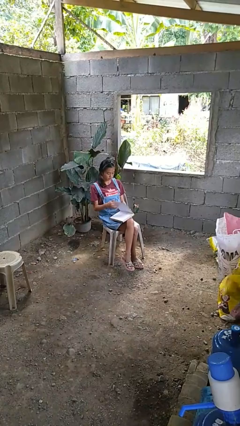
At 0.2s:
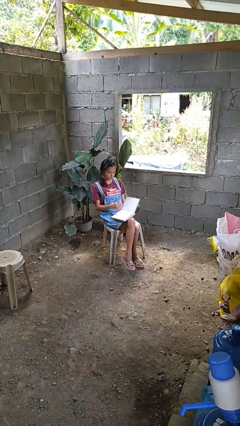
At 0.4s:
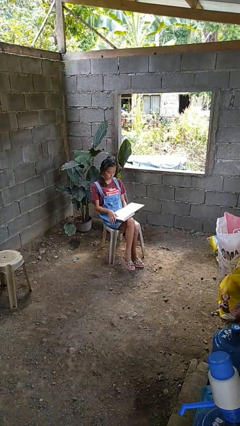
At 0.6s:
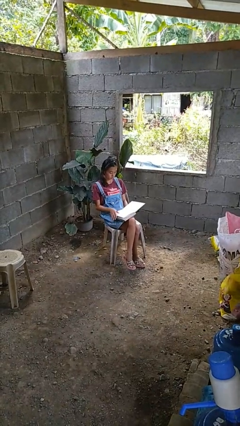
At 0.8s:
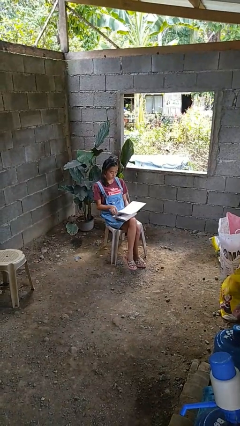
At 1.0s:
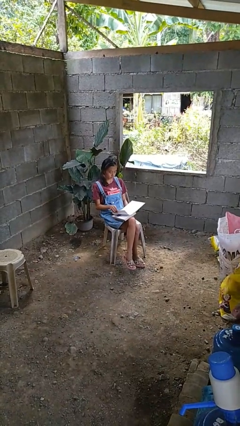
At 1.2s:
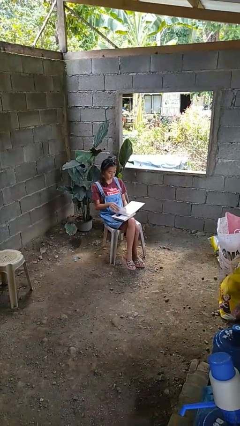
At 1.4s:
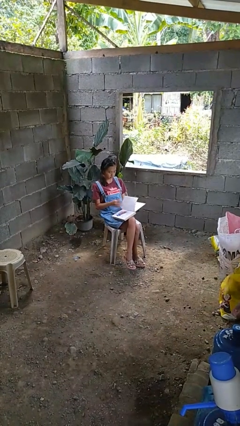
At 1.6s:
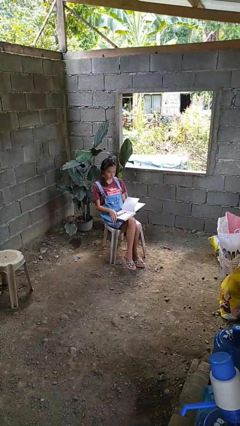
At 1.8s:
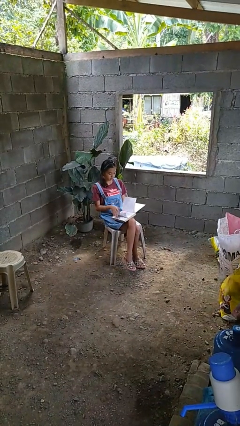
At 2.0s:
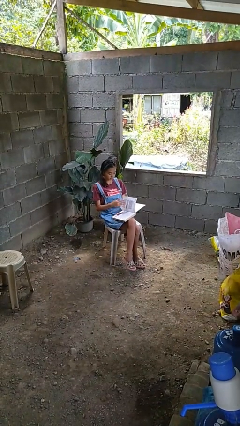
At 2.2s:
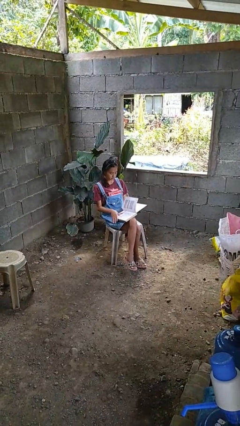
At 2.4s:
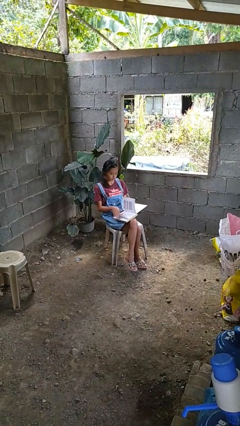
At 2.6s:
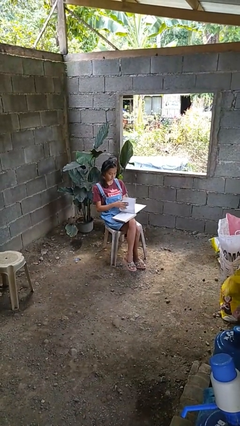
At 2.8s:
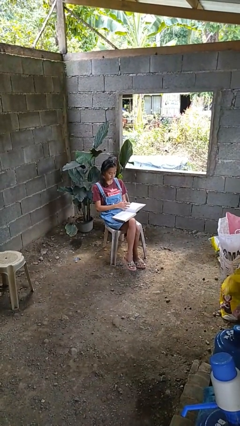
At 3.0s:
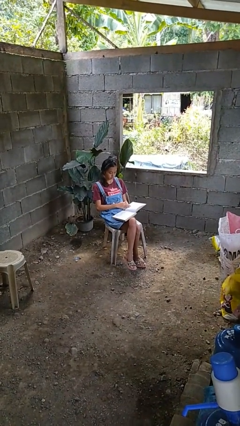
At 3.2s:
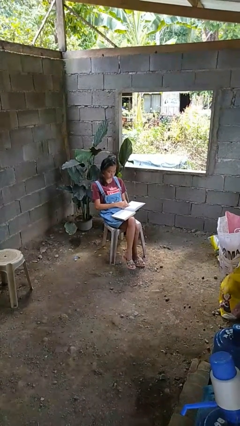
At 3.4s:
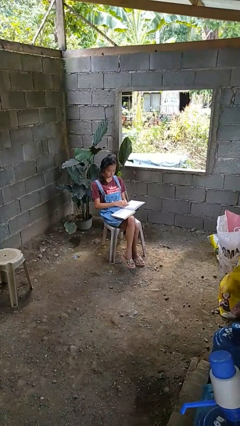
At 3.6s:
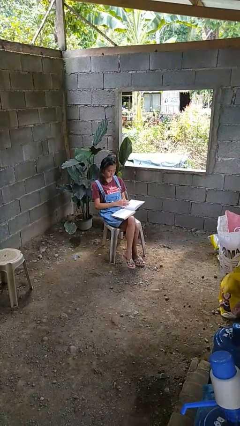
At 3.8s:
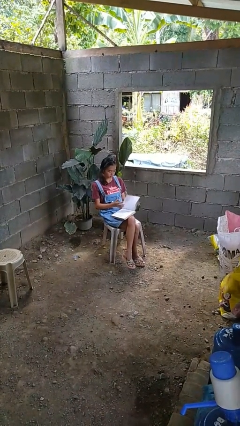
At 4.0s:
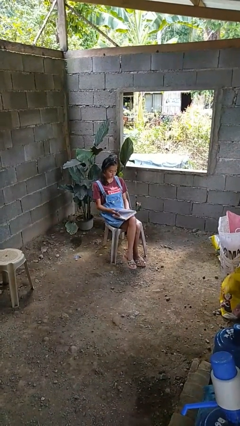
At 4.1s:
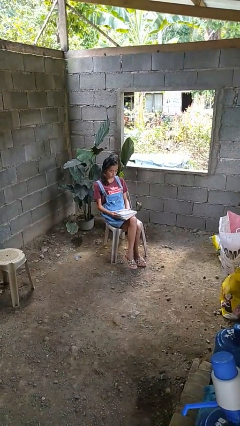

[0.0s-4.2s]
person reads book

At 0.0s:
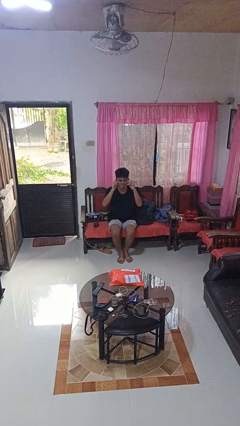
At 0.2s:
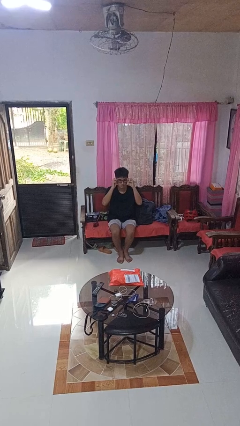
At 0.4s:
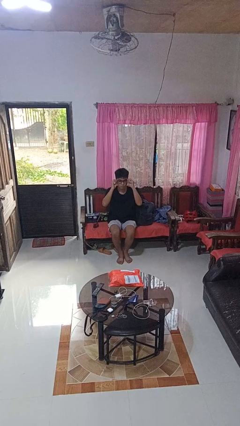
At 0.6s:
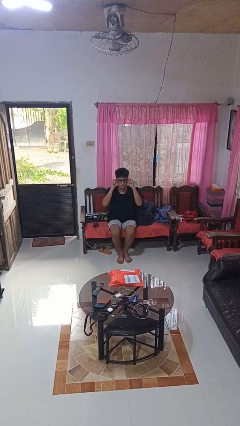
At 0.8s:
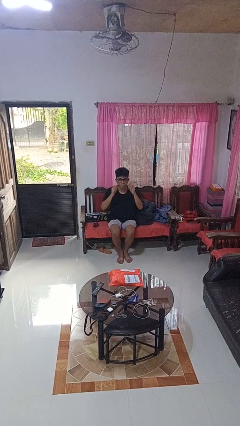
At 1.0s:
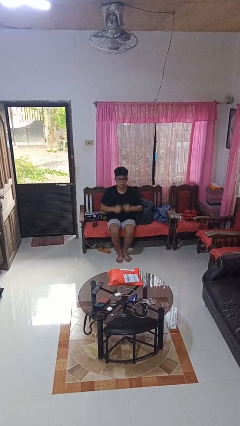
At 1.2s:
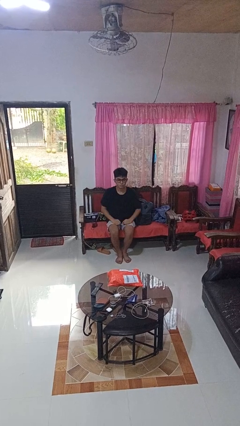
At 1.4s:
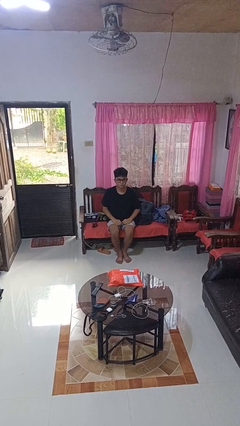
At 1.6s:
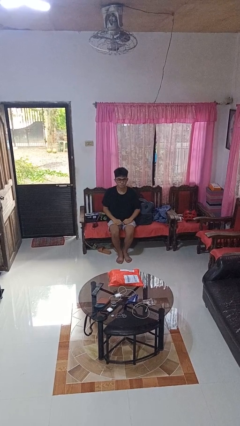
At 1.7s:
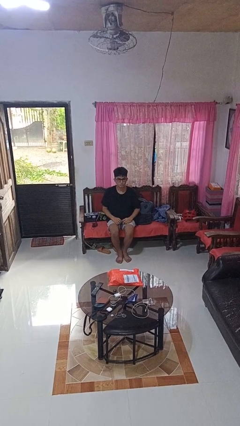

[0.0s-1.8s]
person puts on glasses

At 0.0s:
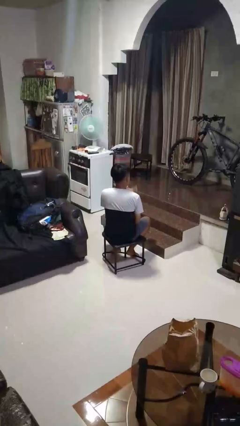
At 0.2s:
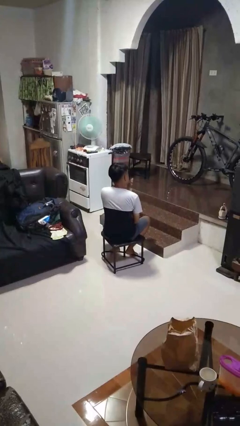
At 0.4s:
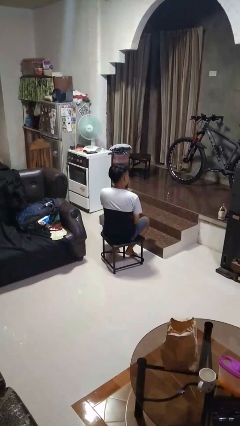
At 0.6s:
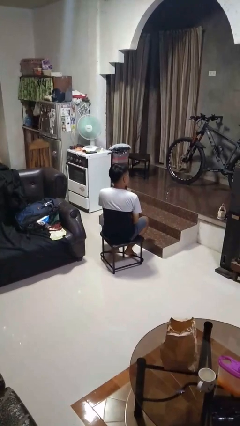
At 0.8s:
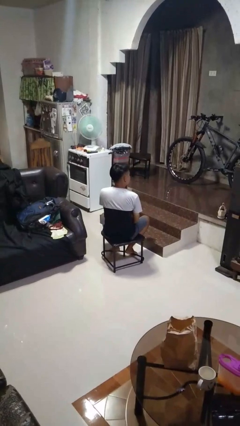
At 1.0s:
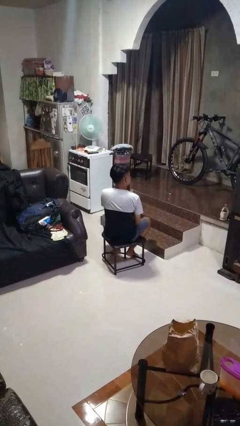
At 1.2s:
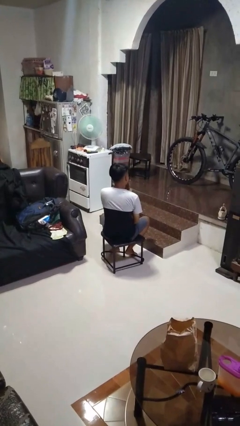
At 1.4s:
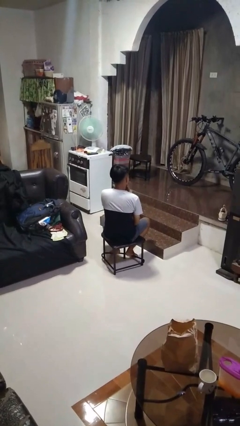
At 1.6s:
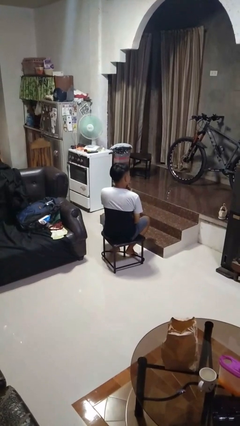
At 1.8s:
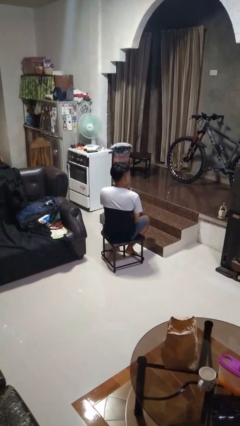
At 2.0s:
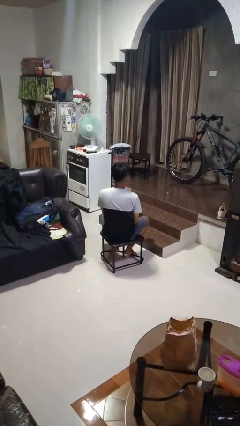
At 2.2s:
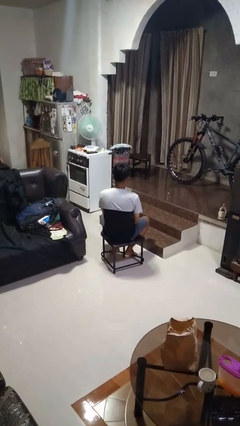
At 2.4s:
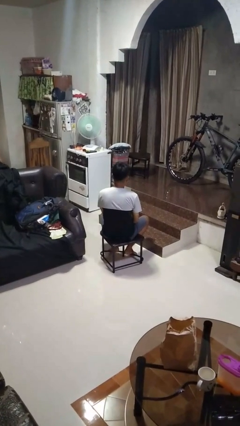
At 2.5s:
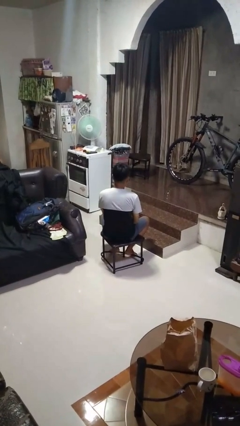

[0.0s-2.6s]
person strokes chin

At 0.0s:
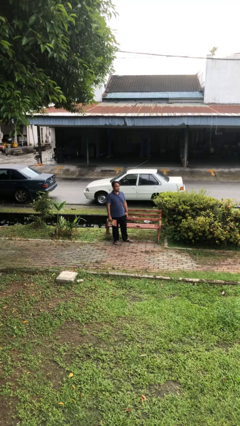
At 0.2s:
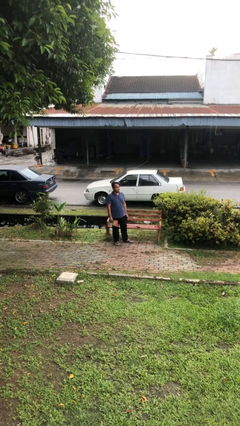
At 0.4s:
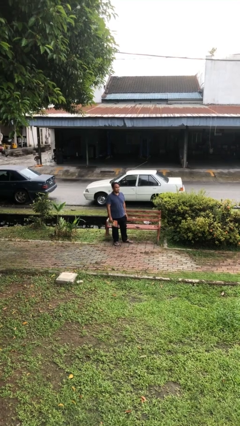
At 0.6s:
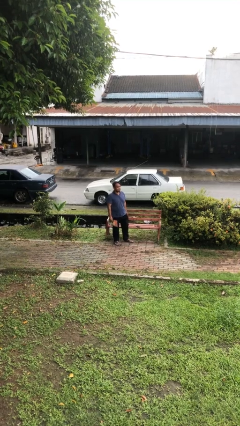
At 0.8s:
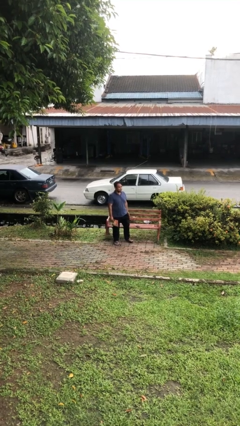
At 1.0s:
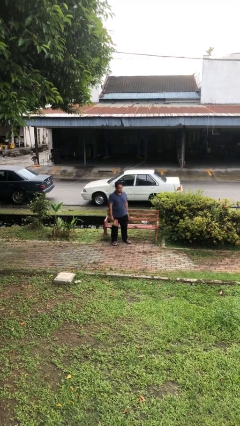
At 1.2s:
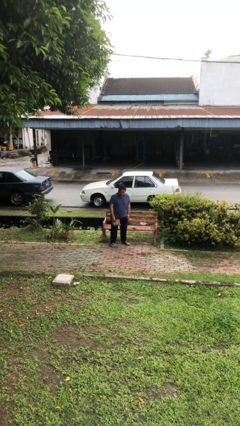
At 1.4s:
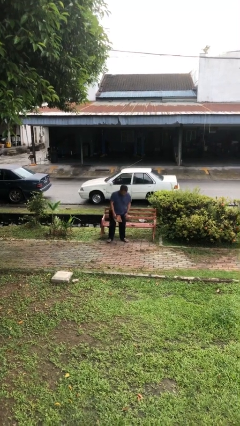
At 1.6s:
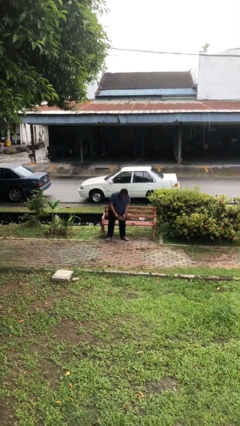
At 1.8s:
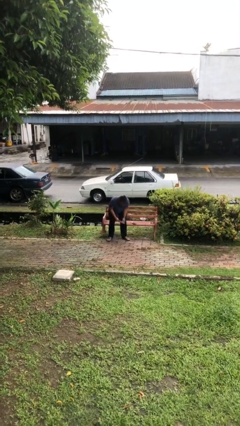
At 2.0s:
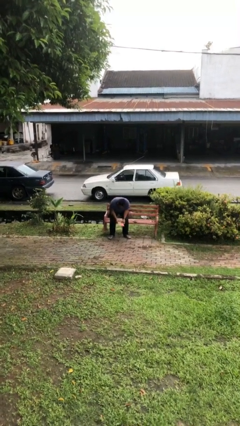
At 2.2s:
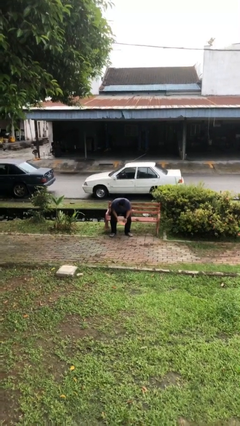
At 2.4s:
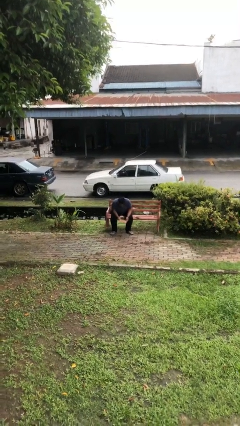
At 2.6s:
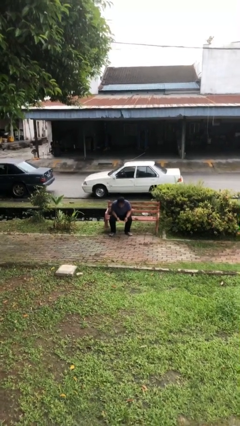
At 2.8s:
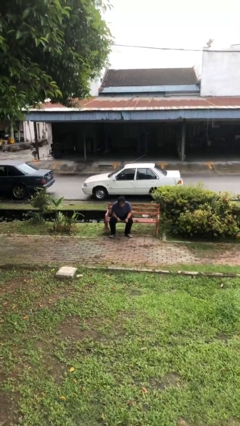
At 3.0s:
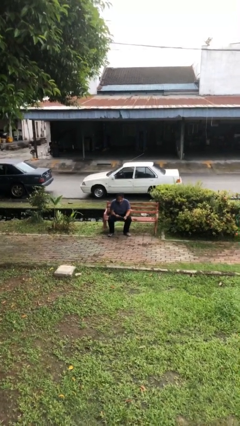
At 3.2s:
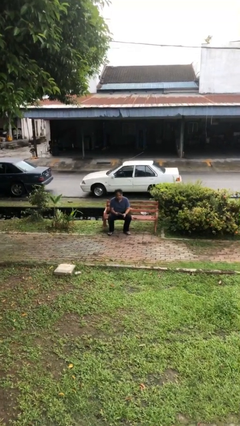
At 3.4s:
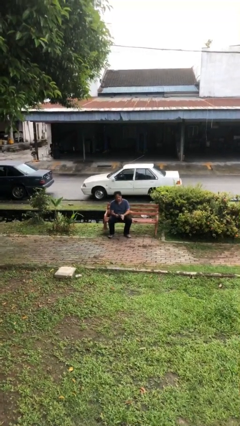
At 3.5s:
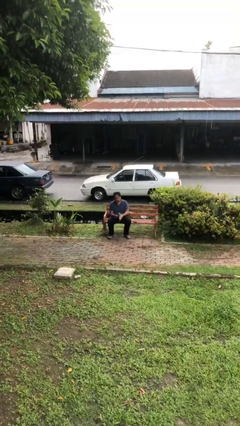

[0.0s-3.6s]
person sits down

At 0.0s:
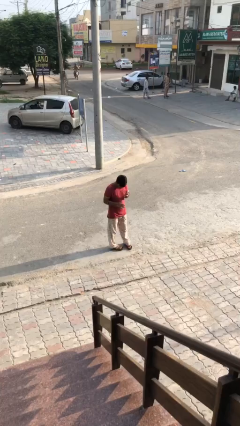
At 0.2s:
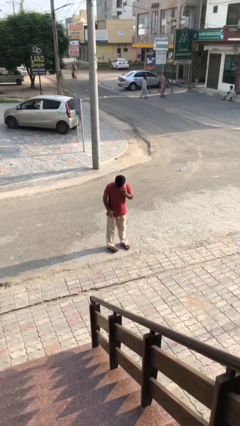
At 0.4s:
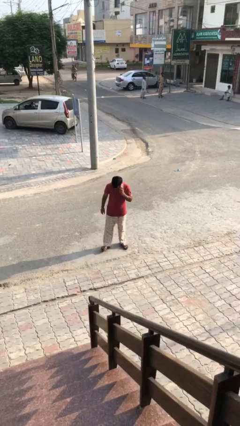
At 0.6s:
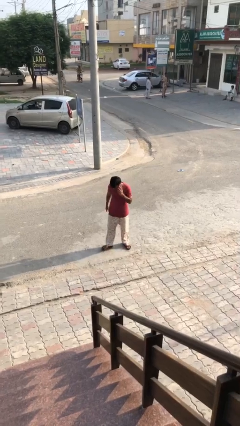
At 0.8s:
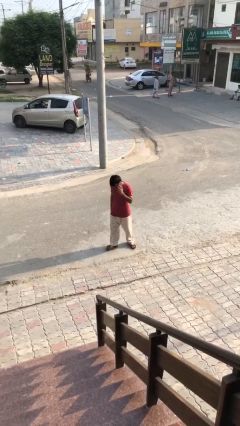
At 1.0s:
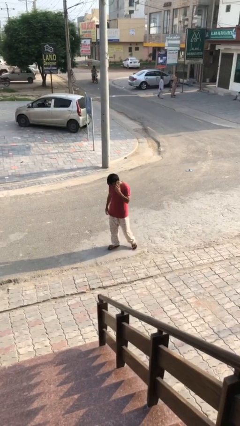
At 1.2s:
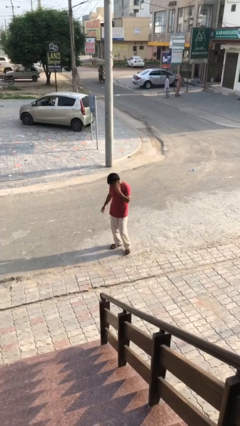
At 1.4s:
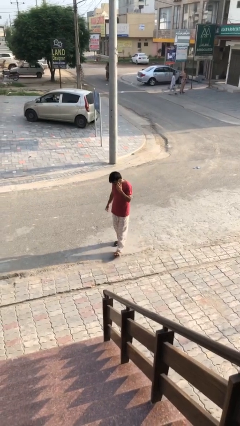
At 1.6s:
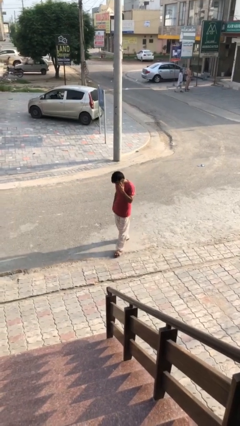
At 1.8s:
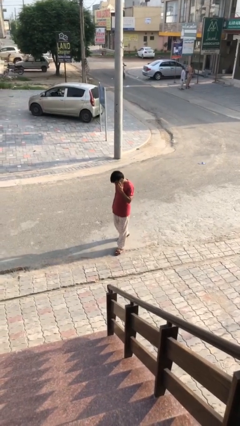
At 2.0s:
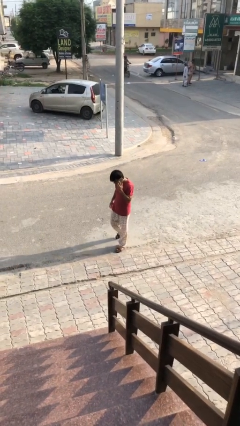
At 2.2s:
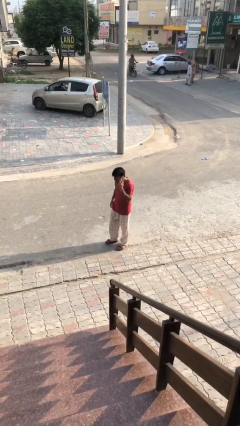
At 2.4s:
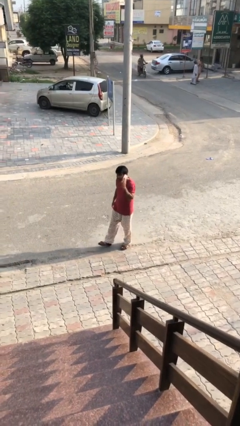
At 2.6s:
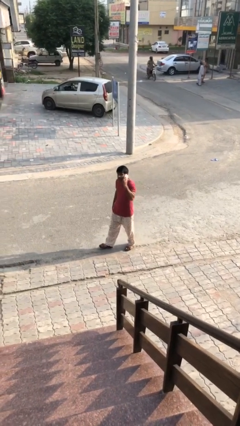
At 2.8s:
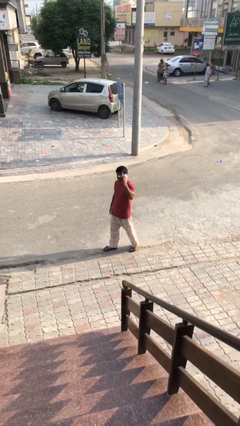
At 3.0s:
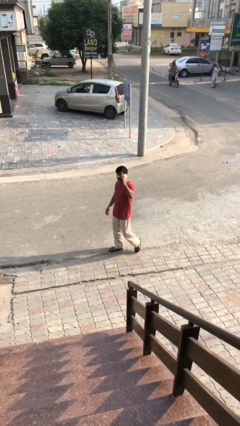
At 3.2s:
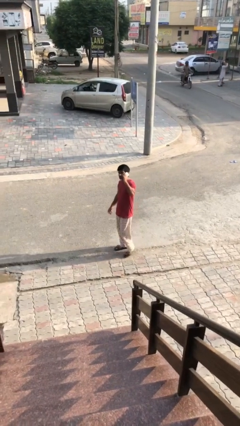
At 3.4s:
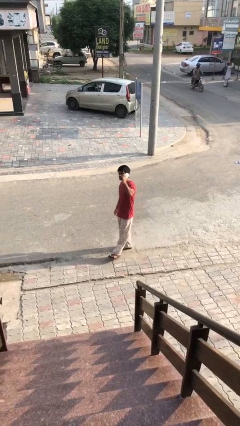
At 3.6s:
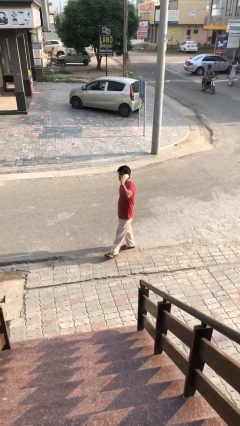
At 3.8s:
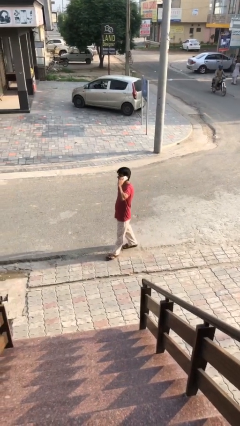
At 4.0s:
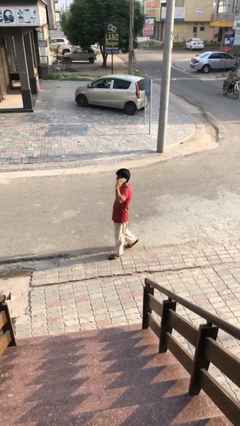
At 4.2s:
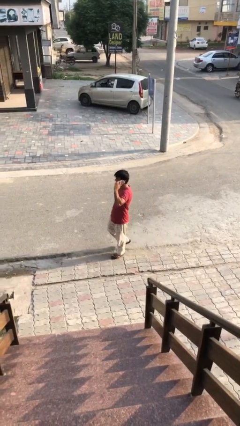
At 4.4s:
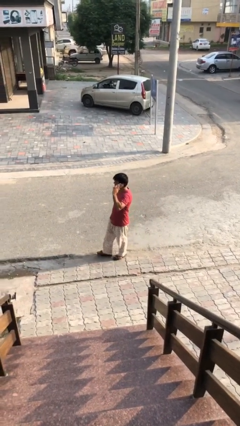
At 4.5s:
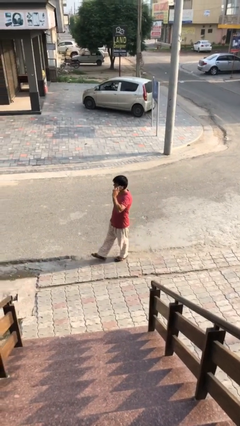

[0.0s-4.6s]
person talks on phone

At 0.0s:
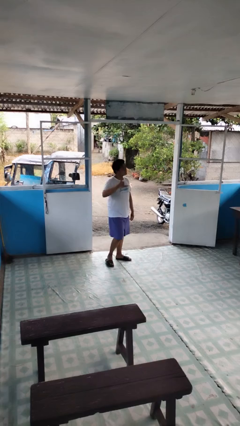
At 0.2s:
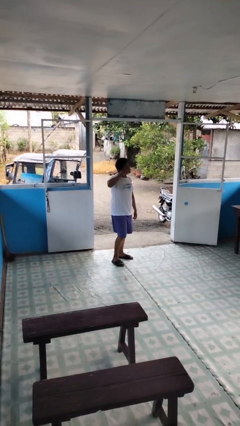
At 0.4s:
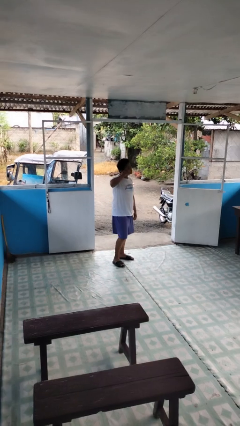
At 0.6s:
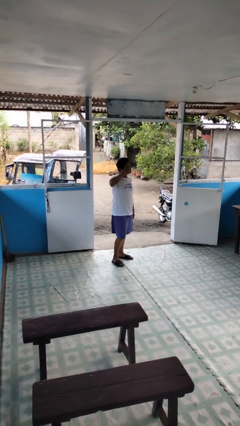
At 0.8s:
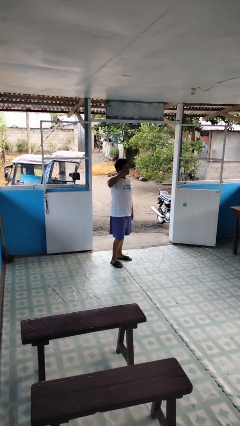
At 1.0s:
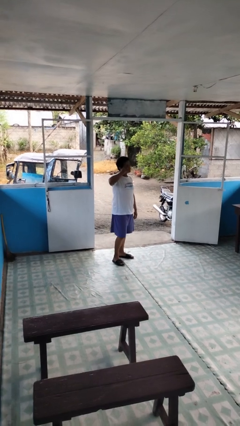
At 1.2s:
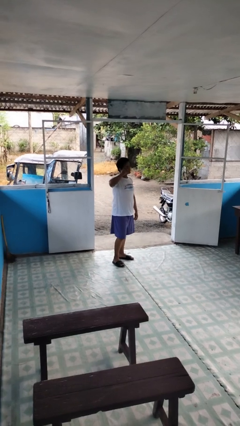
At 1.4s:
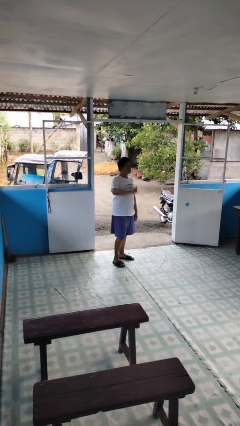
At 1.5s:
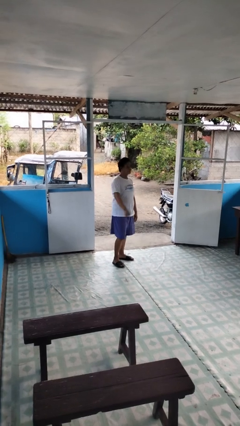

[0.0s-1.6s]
person gestures call me
